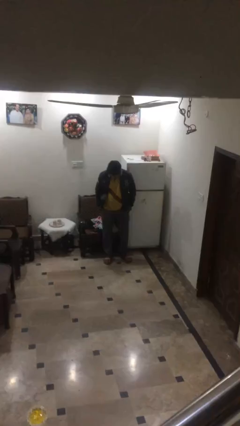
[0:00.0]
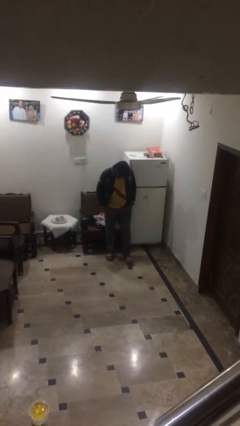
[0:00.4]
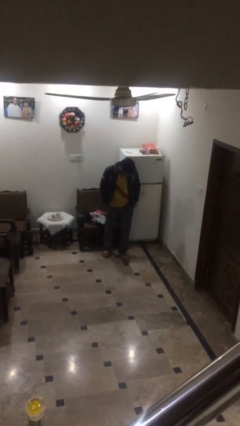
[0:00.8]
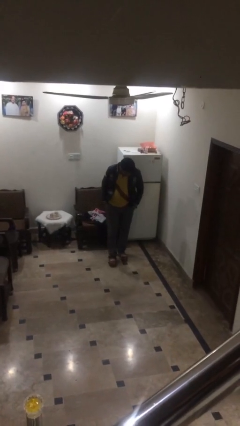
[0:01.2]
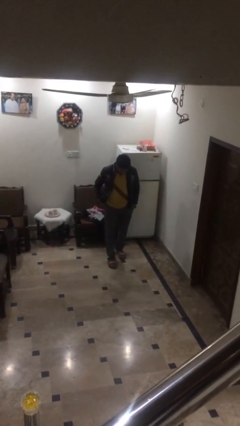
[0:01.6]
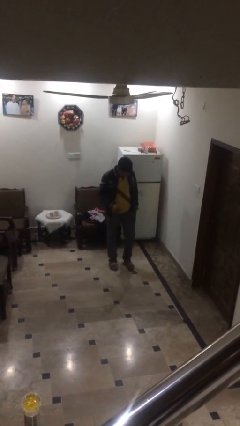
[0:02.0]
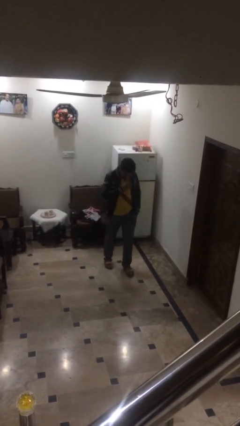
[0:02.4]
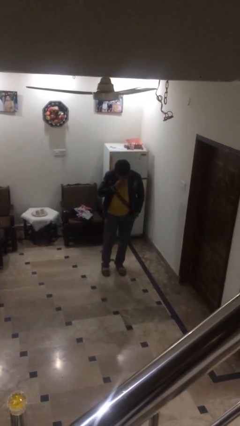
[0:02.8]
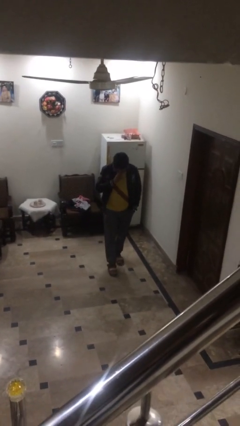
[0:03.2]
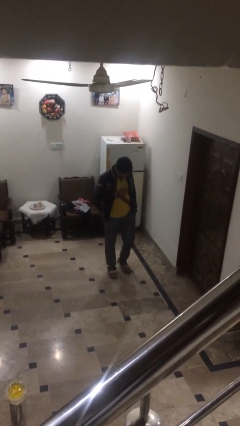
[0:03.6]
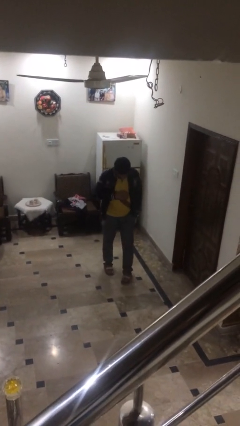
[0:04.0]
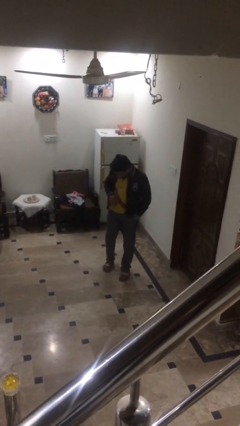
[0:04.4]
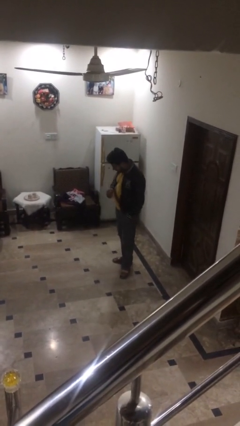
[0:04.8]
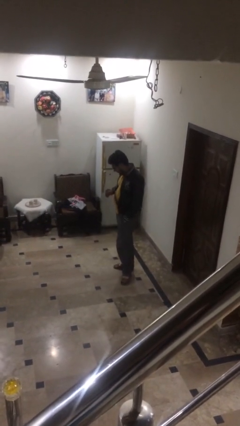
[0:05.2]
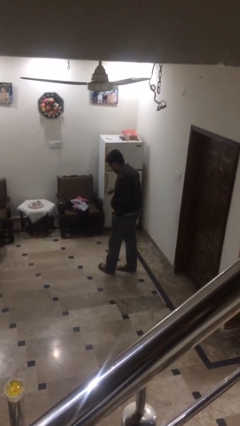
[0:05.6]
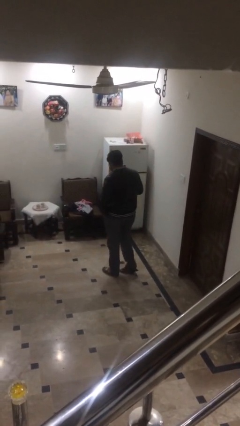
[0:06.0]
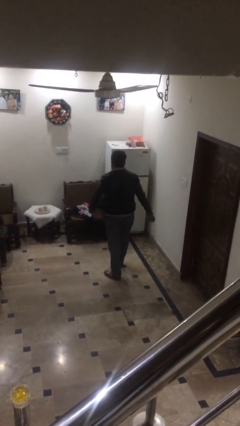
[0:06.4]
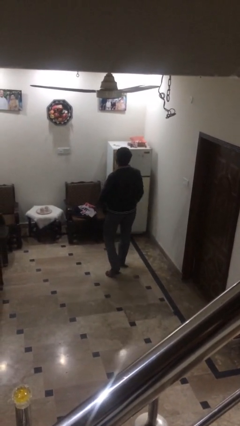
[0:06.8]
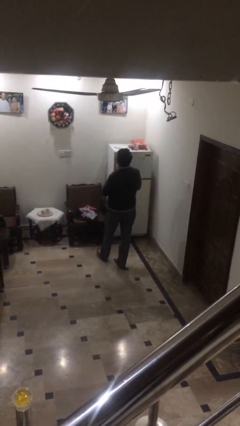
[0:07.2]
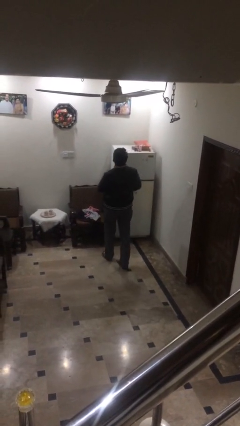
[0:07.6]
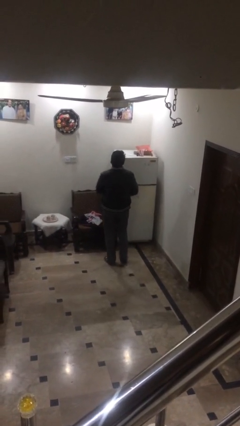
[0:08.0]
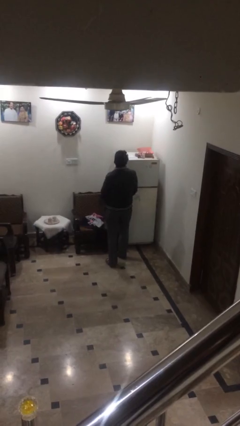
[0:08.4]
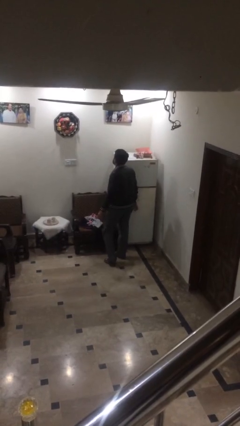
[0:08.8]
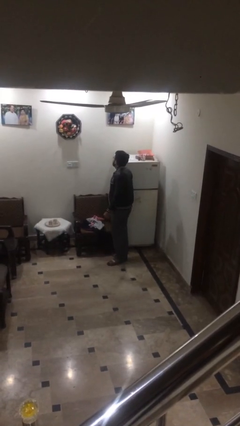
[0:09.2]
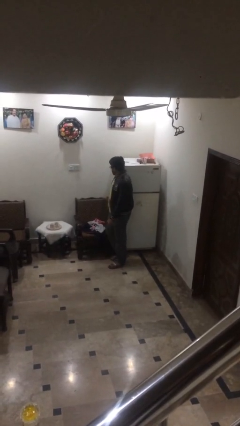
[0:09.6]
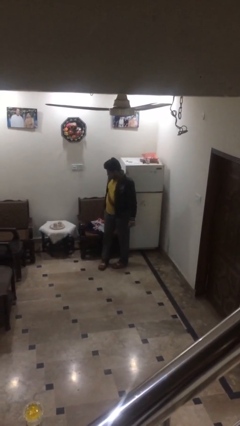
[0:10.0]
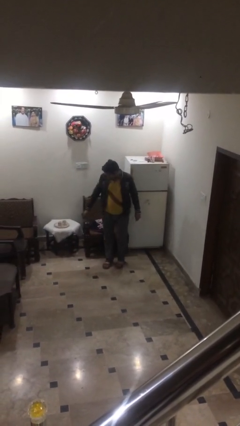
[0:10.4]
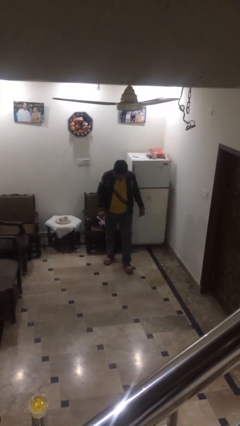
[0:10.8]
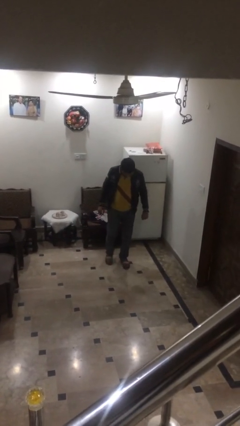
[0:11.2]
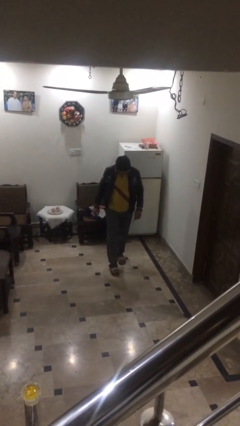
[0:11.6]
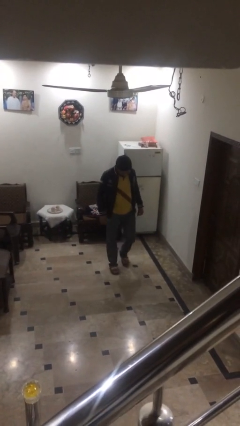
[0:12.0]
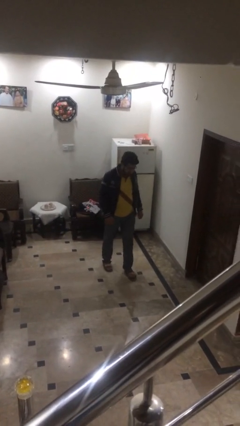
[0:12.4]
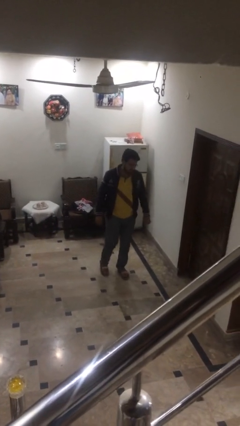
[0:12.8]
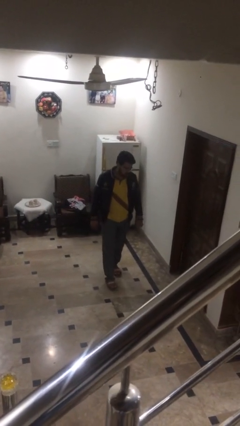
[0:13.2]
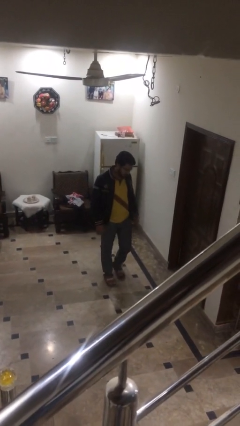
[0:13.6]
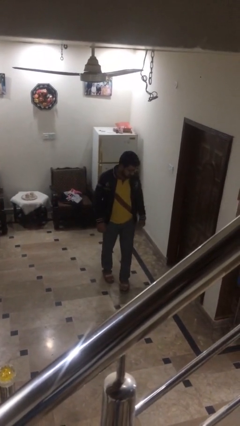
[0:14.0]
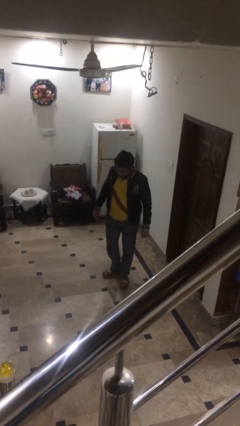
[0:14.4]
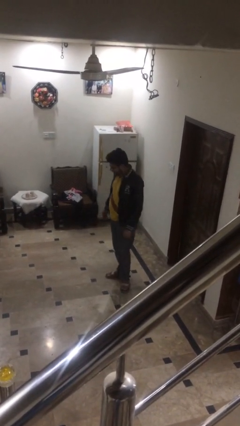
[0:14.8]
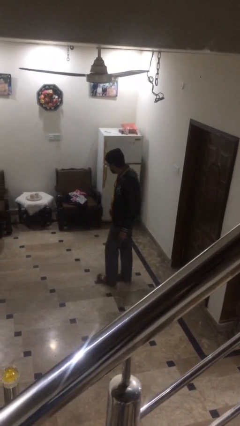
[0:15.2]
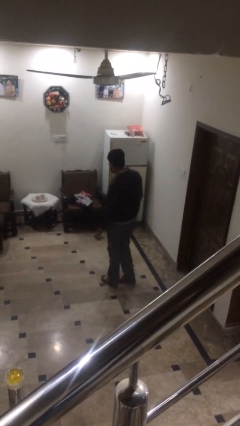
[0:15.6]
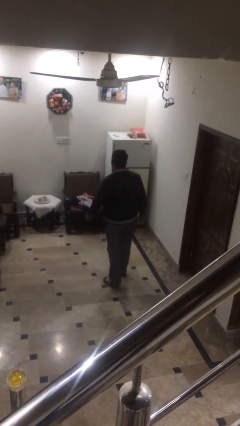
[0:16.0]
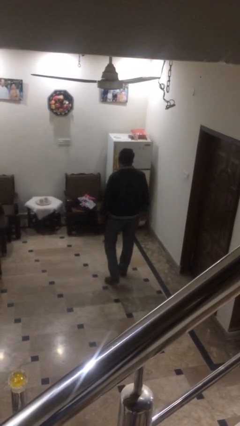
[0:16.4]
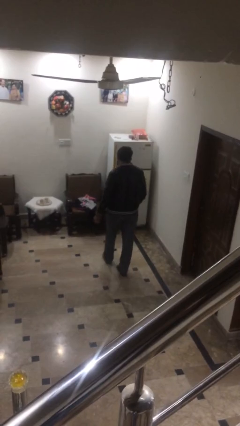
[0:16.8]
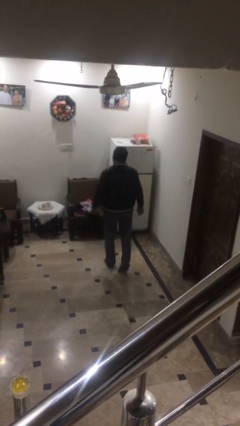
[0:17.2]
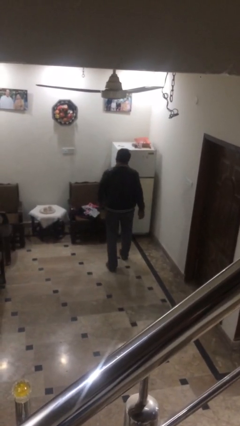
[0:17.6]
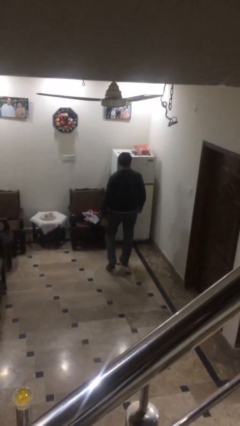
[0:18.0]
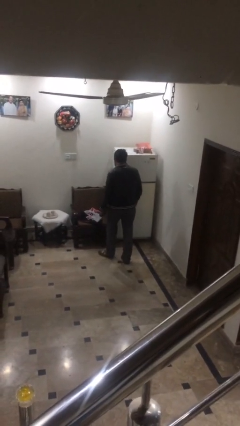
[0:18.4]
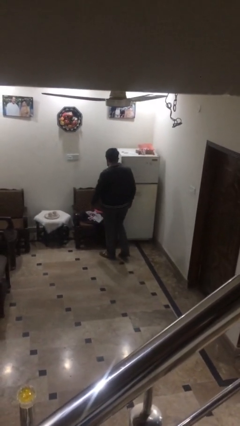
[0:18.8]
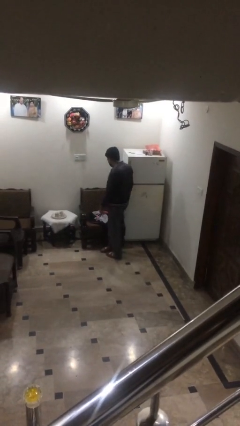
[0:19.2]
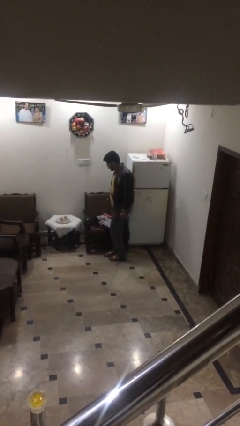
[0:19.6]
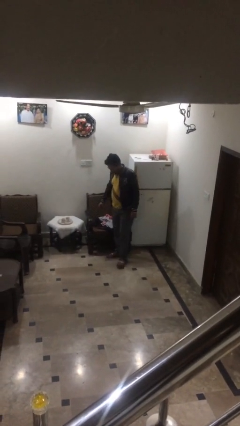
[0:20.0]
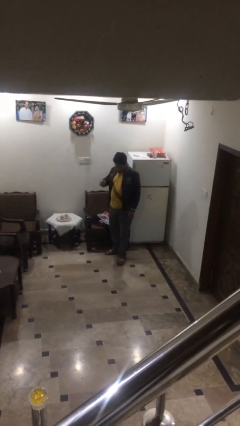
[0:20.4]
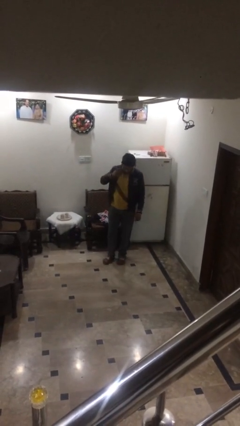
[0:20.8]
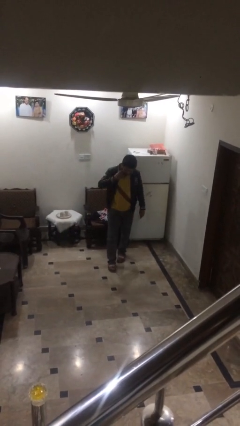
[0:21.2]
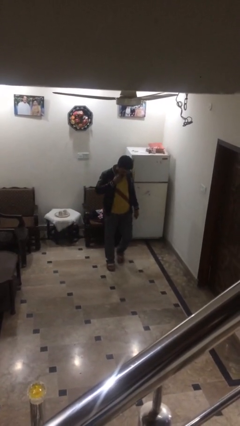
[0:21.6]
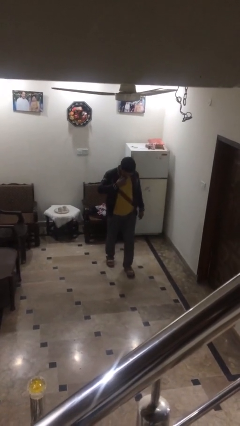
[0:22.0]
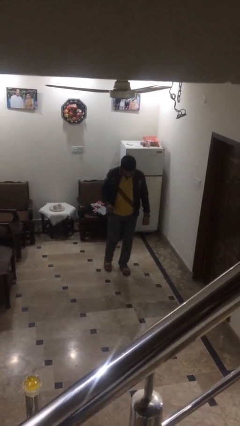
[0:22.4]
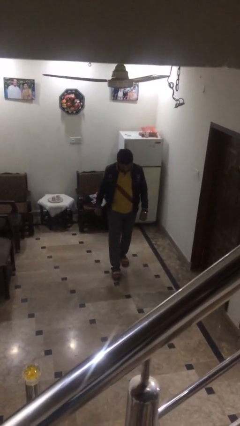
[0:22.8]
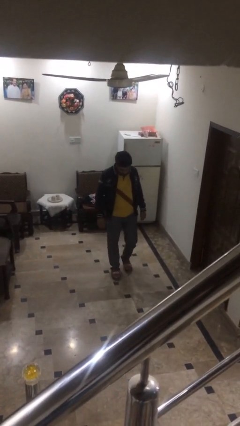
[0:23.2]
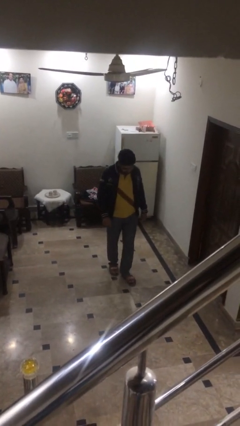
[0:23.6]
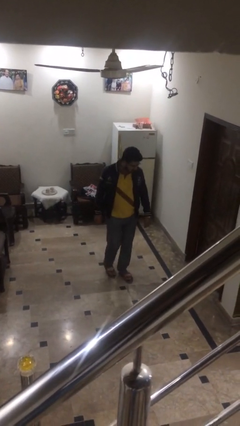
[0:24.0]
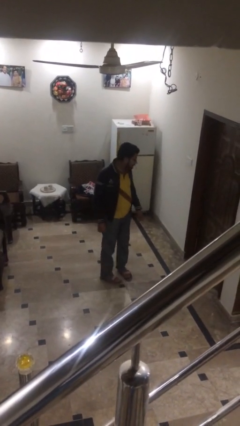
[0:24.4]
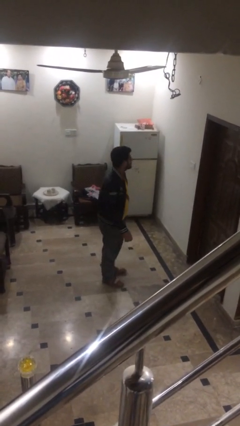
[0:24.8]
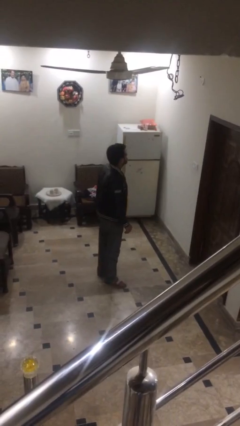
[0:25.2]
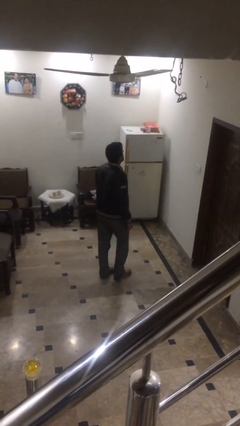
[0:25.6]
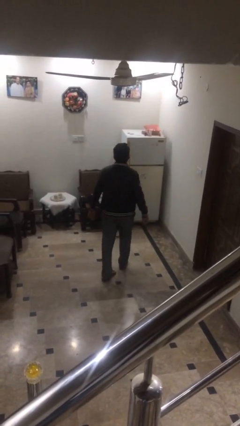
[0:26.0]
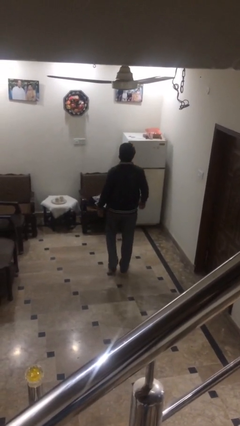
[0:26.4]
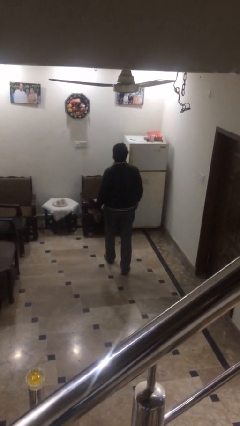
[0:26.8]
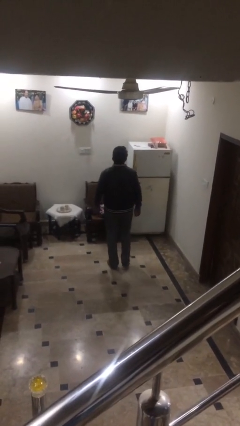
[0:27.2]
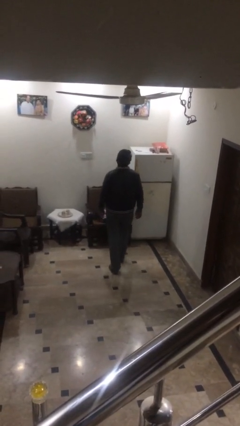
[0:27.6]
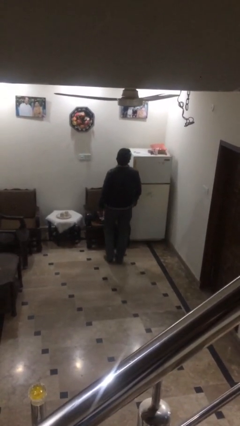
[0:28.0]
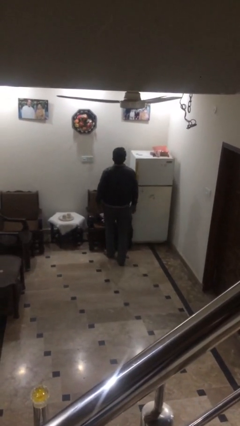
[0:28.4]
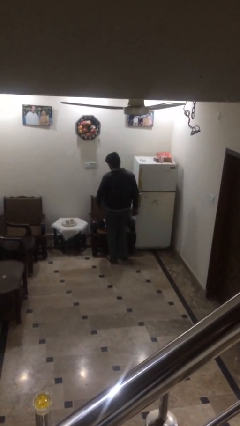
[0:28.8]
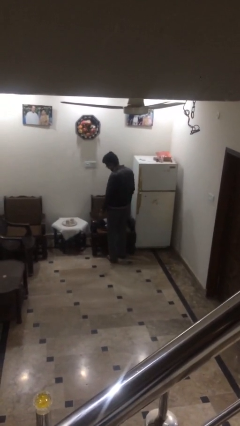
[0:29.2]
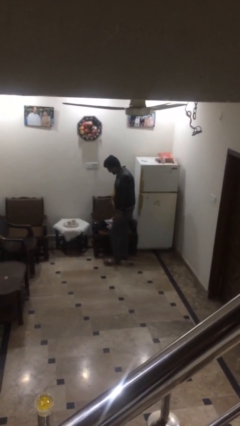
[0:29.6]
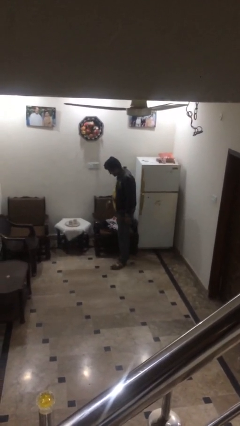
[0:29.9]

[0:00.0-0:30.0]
person walks

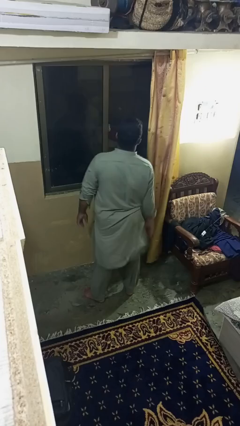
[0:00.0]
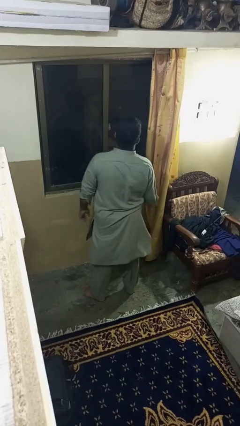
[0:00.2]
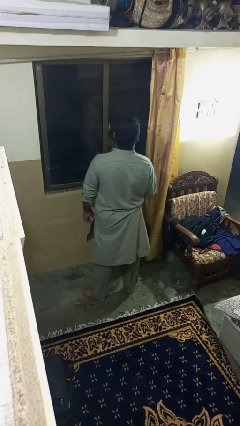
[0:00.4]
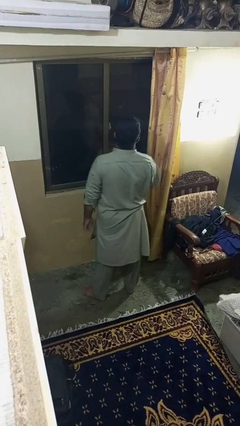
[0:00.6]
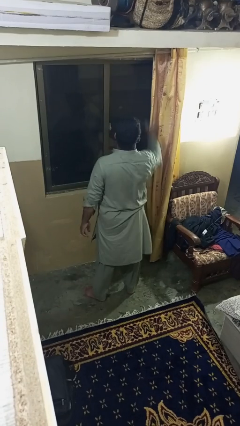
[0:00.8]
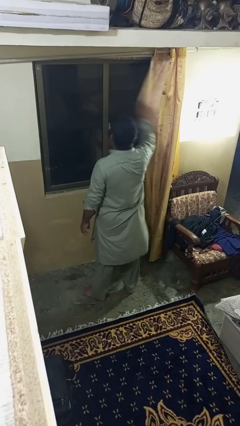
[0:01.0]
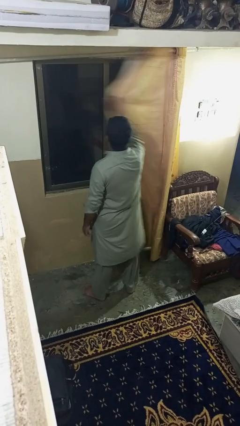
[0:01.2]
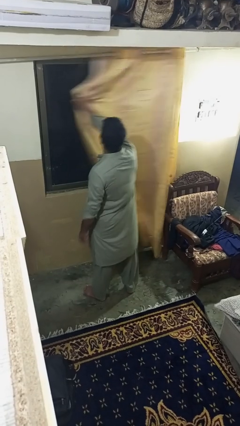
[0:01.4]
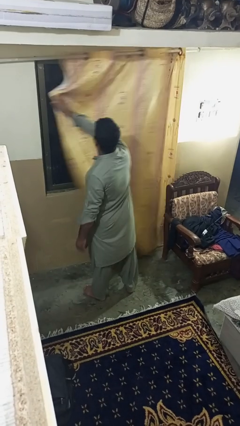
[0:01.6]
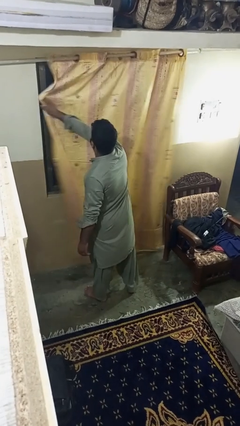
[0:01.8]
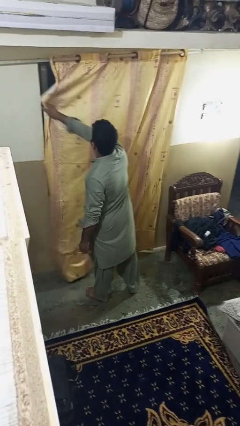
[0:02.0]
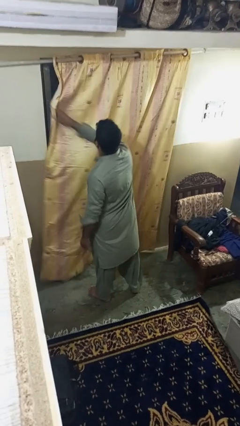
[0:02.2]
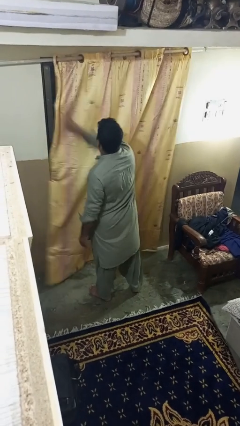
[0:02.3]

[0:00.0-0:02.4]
person closes curtains

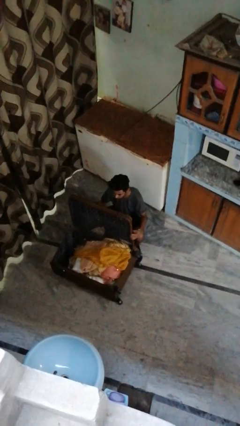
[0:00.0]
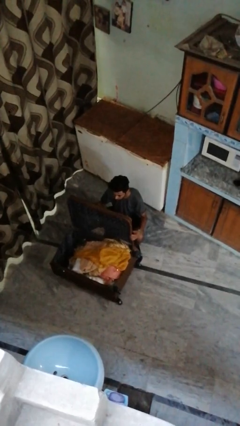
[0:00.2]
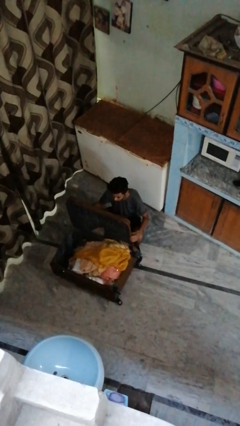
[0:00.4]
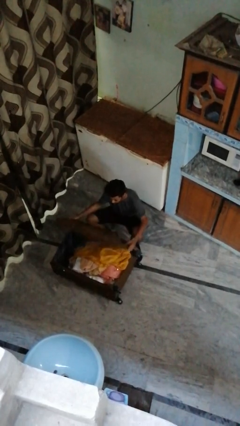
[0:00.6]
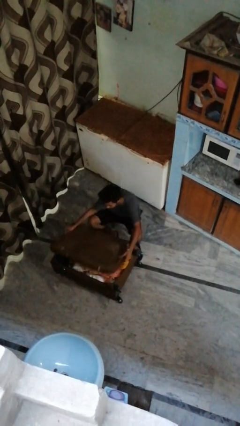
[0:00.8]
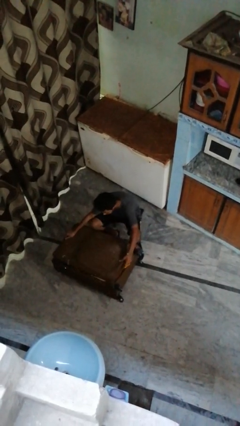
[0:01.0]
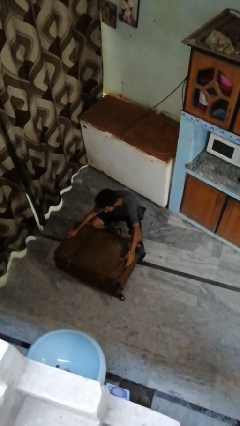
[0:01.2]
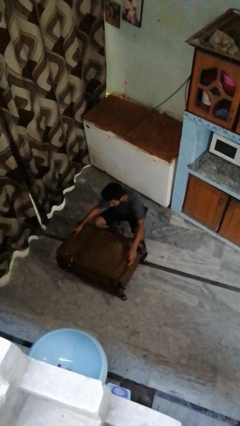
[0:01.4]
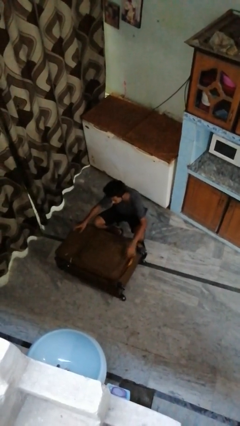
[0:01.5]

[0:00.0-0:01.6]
person closes suitcase
